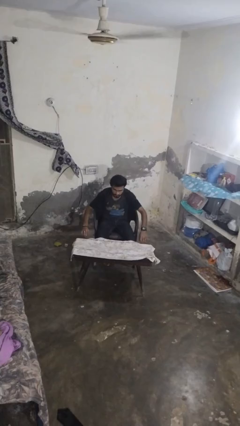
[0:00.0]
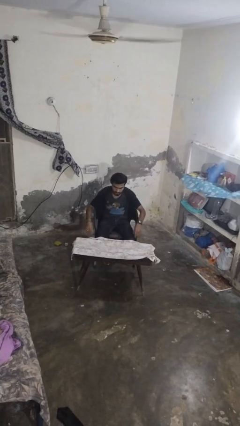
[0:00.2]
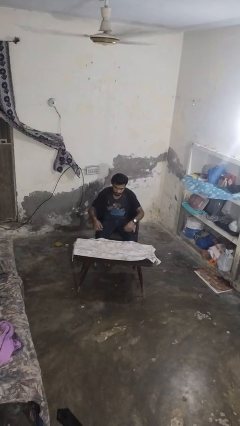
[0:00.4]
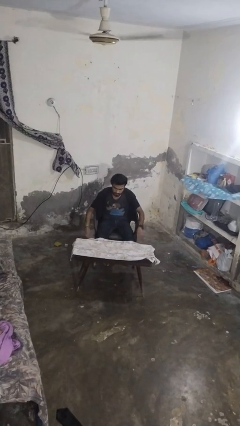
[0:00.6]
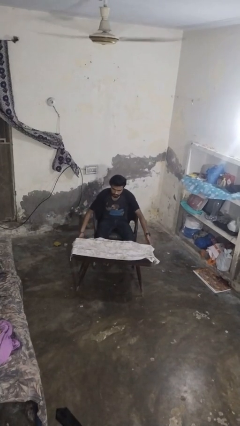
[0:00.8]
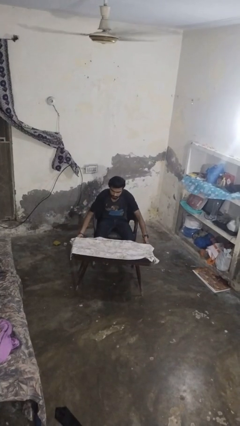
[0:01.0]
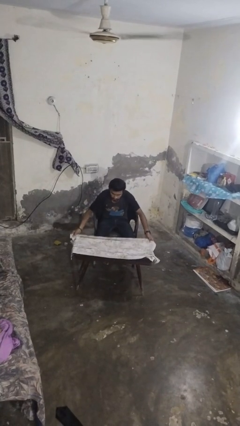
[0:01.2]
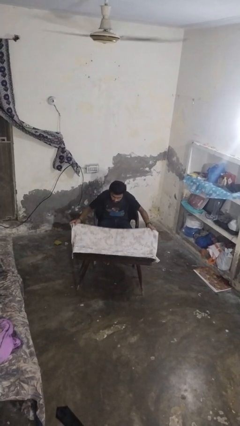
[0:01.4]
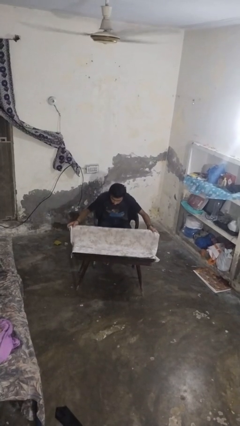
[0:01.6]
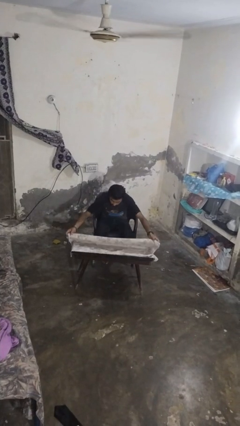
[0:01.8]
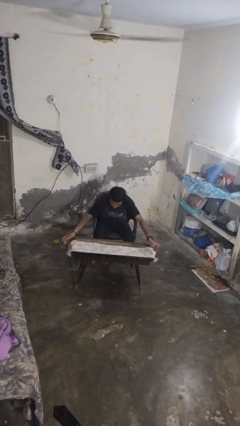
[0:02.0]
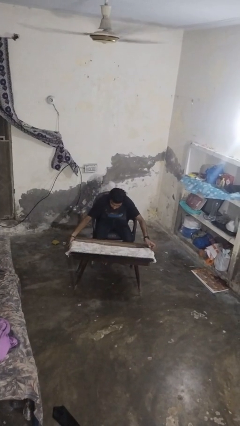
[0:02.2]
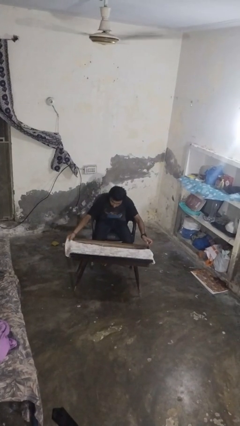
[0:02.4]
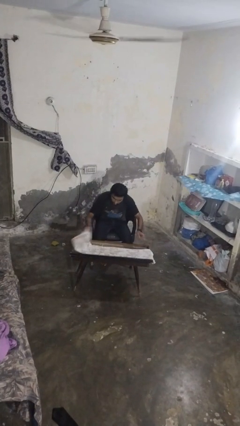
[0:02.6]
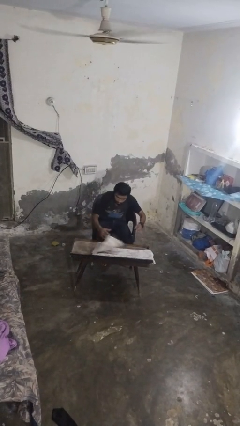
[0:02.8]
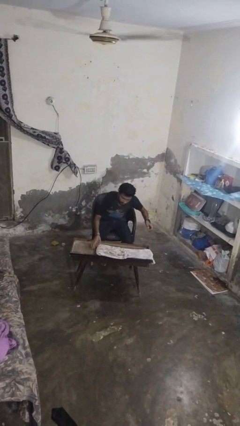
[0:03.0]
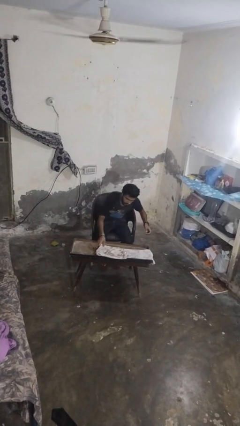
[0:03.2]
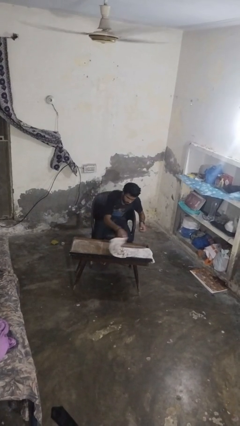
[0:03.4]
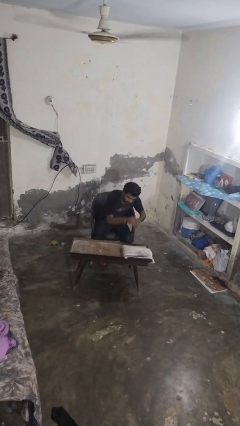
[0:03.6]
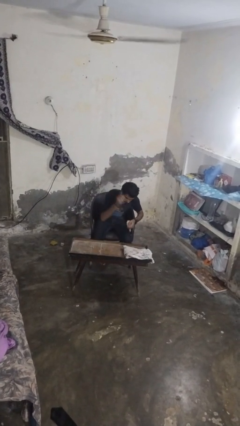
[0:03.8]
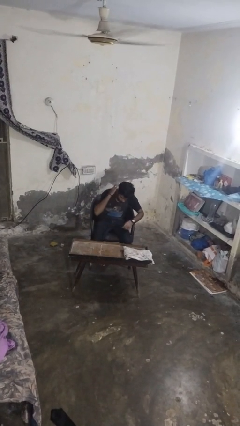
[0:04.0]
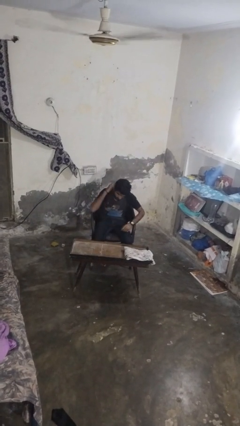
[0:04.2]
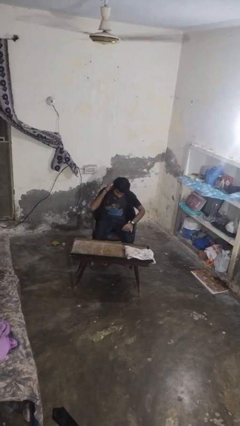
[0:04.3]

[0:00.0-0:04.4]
person folds tablecloth

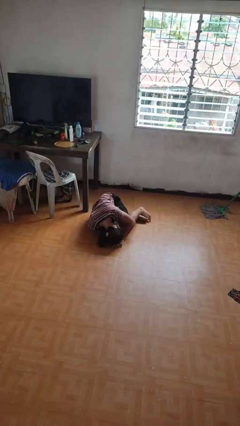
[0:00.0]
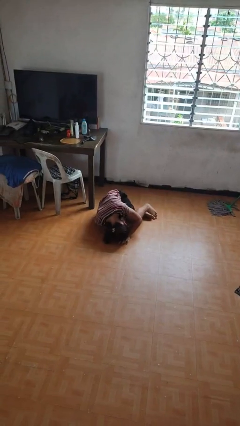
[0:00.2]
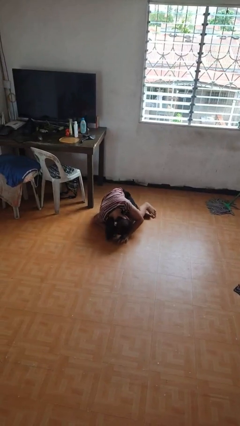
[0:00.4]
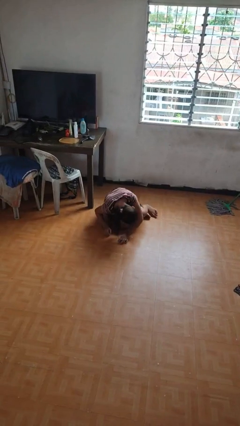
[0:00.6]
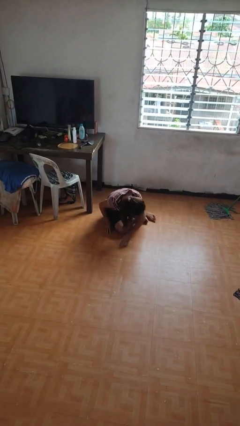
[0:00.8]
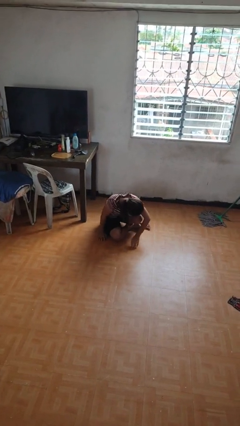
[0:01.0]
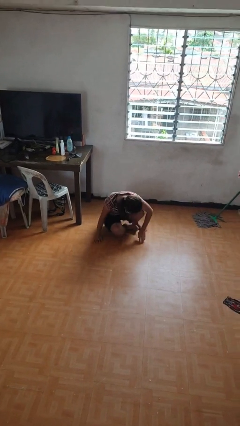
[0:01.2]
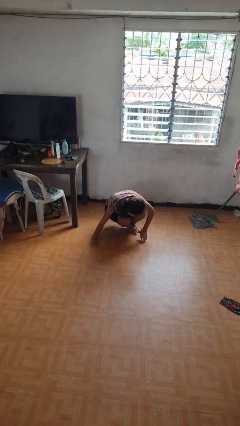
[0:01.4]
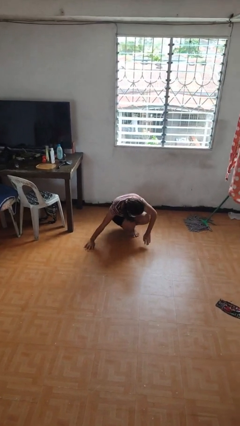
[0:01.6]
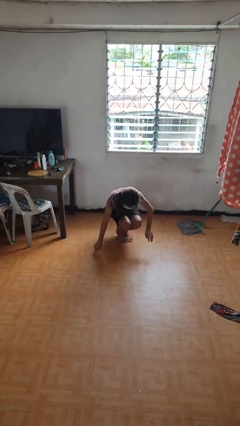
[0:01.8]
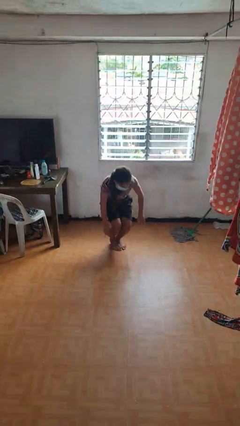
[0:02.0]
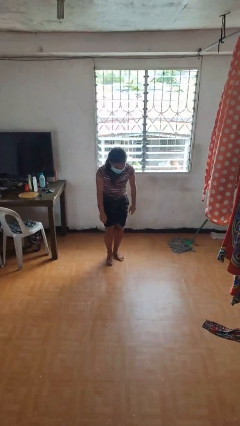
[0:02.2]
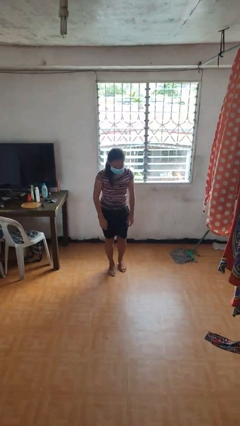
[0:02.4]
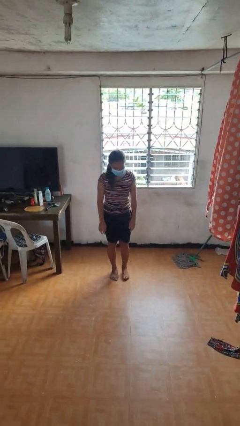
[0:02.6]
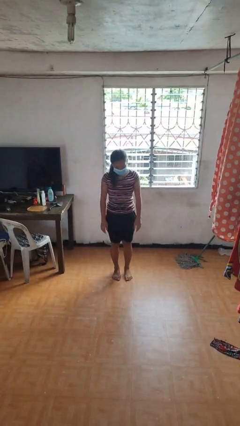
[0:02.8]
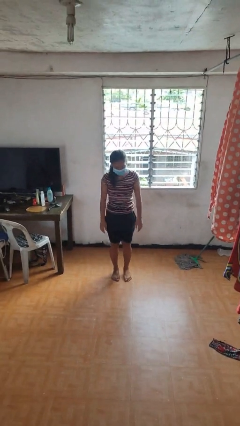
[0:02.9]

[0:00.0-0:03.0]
person stands up from floor

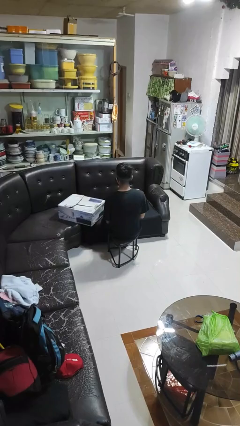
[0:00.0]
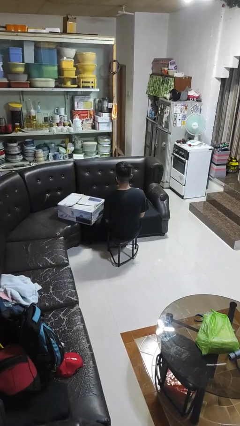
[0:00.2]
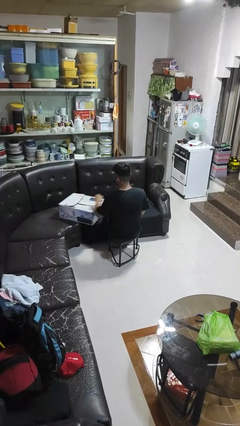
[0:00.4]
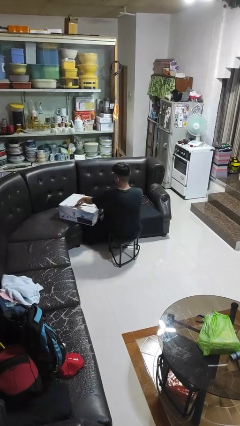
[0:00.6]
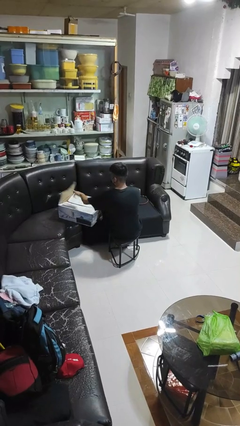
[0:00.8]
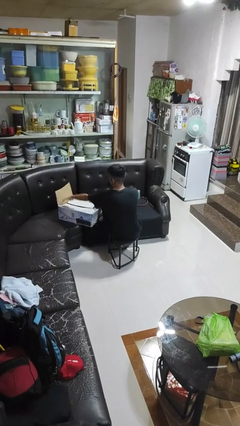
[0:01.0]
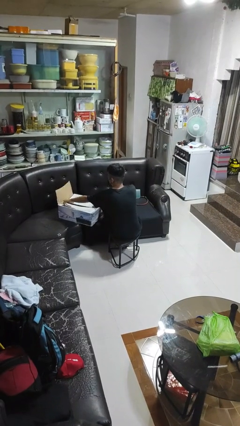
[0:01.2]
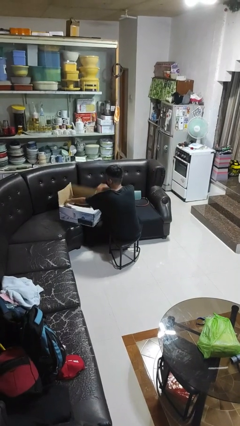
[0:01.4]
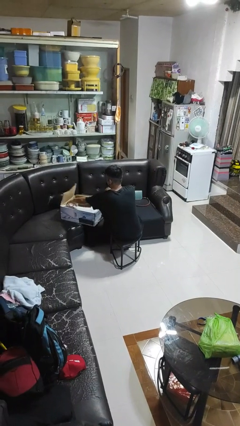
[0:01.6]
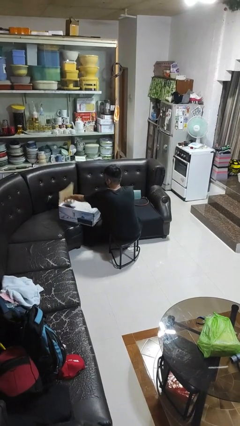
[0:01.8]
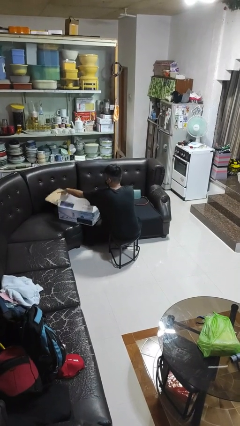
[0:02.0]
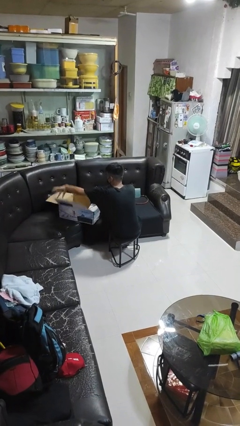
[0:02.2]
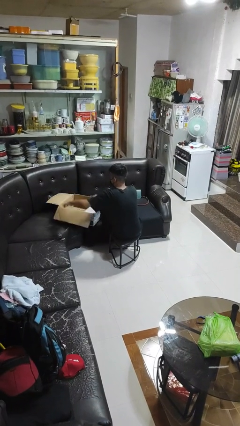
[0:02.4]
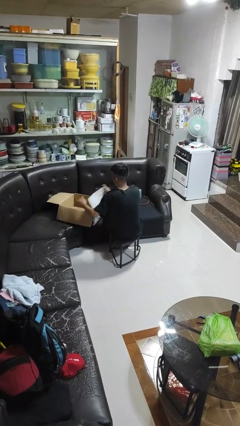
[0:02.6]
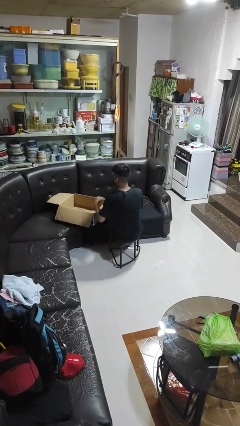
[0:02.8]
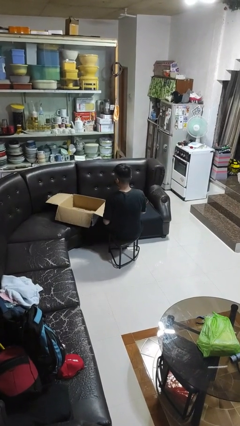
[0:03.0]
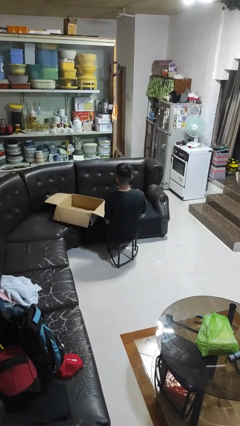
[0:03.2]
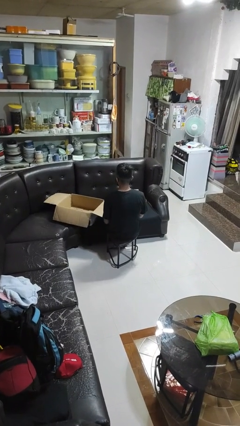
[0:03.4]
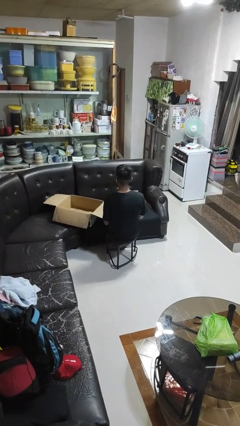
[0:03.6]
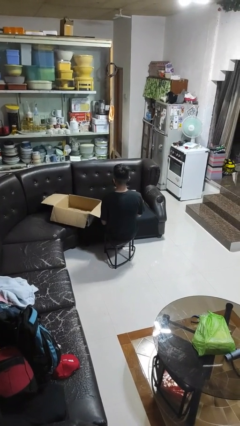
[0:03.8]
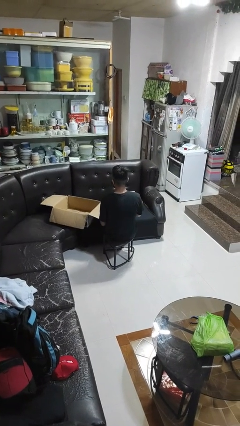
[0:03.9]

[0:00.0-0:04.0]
person opens box

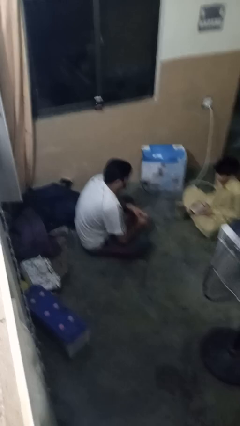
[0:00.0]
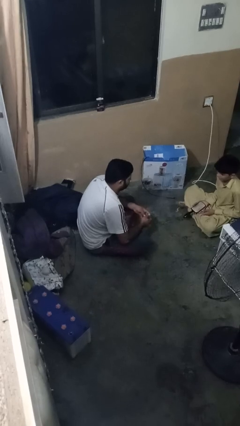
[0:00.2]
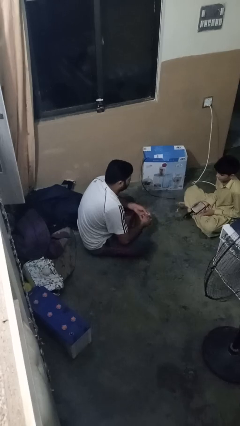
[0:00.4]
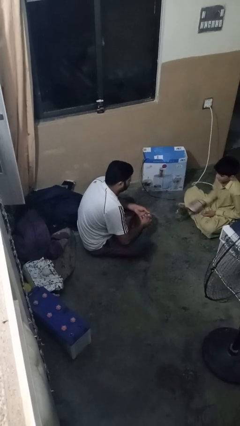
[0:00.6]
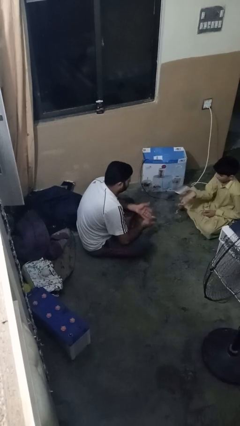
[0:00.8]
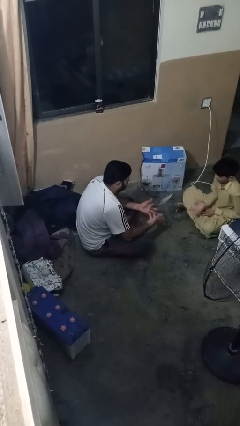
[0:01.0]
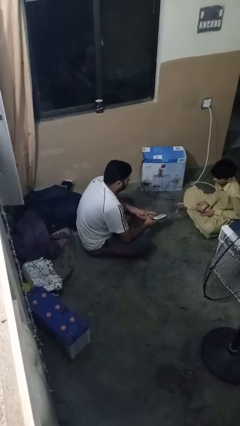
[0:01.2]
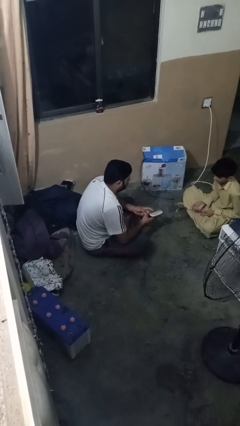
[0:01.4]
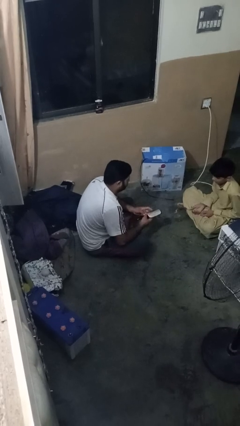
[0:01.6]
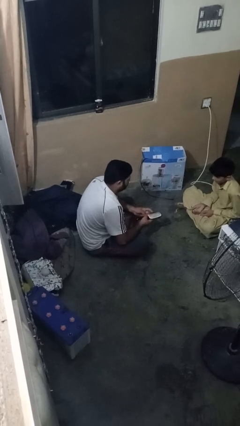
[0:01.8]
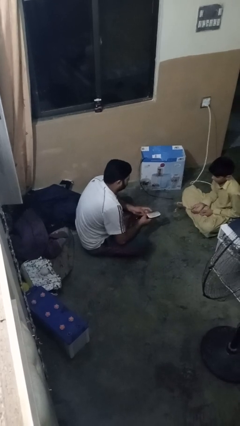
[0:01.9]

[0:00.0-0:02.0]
person catches object from person

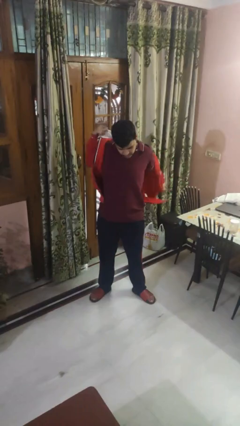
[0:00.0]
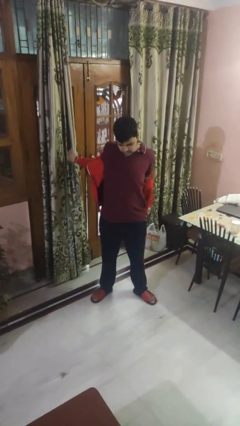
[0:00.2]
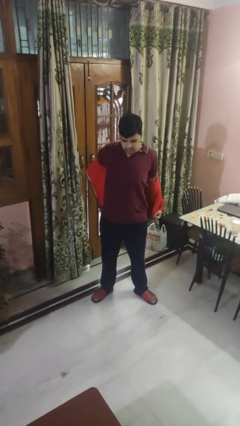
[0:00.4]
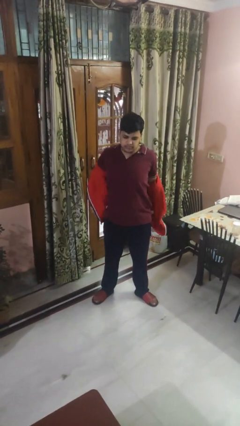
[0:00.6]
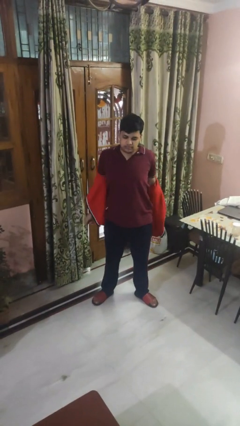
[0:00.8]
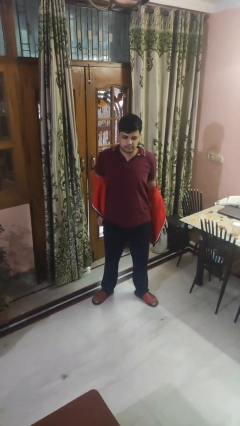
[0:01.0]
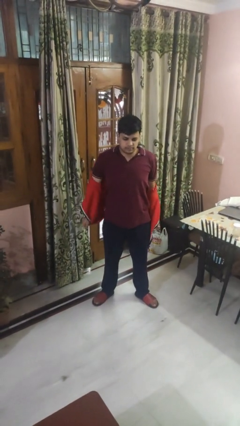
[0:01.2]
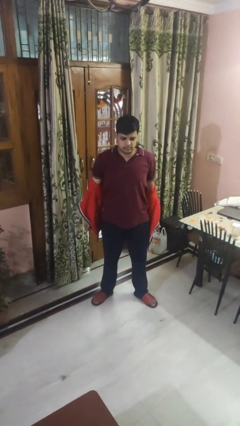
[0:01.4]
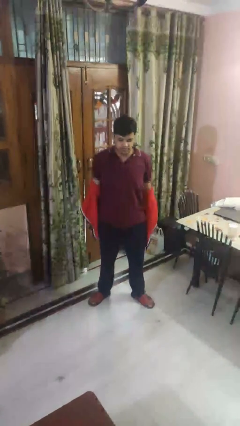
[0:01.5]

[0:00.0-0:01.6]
person takes off hoodie

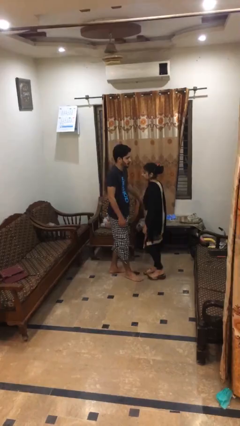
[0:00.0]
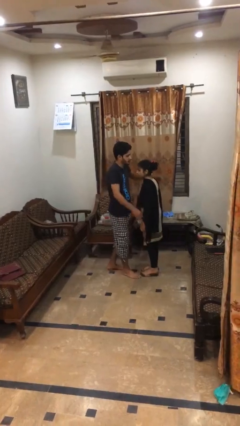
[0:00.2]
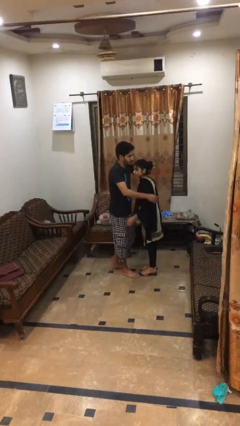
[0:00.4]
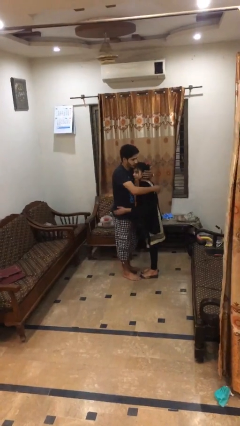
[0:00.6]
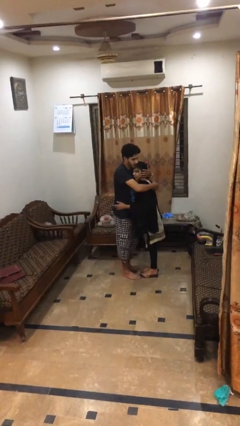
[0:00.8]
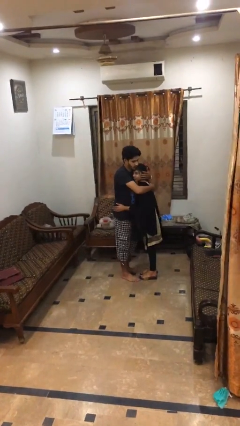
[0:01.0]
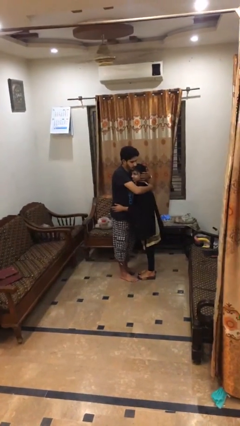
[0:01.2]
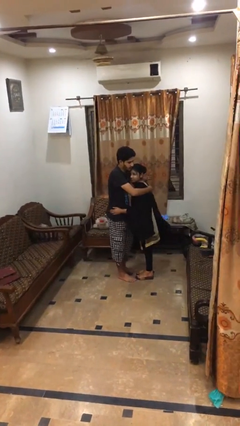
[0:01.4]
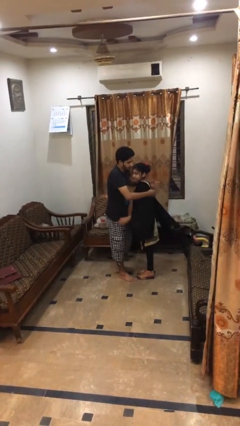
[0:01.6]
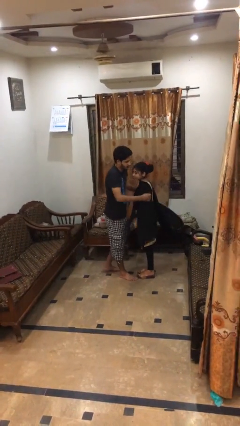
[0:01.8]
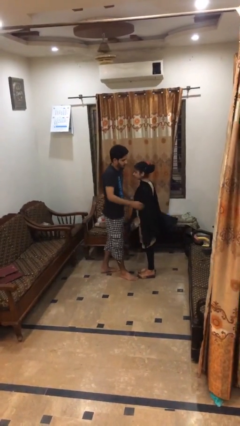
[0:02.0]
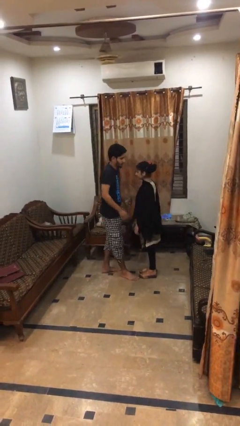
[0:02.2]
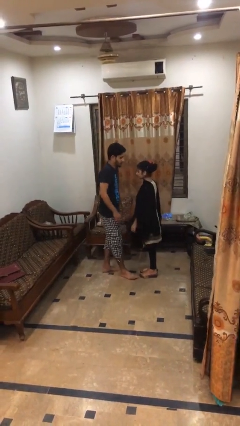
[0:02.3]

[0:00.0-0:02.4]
person embraces person

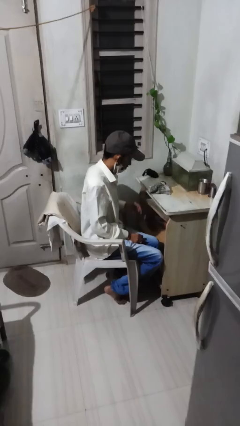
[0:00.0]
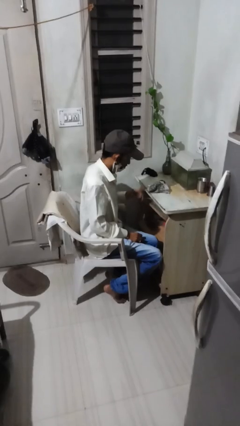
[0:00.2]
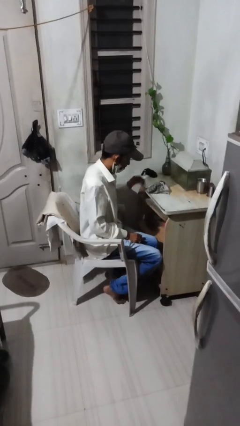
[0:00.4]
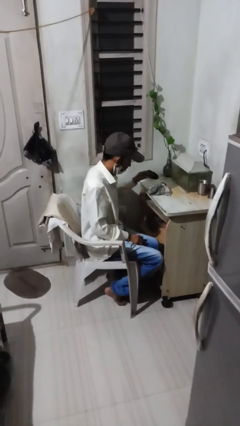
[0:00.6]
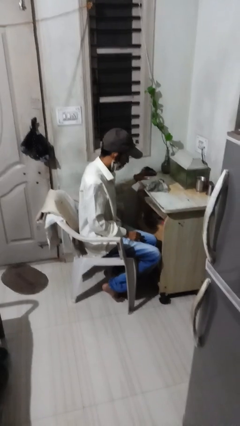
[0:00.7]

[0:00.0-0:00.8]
person cleans table with rag
